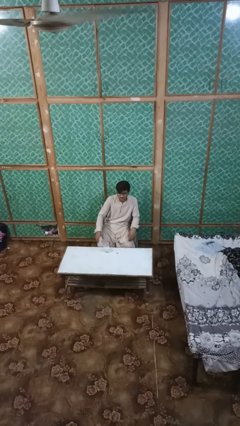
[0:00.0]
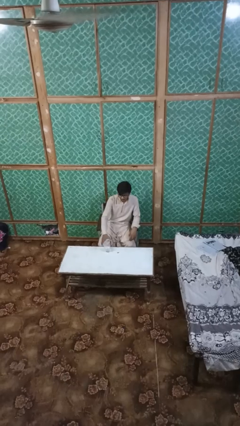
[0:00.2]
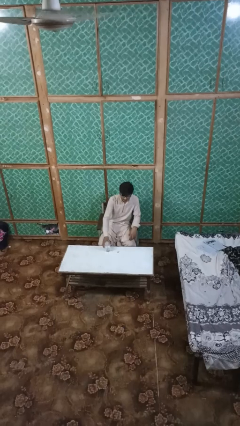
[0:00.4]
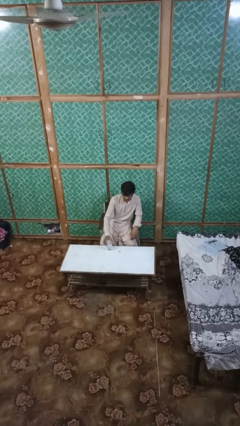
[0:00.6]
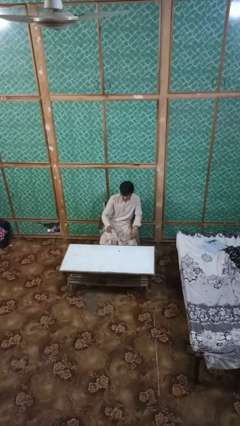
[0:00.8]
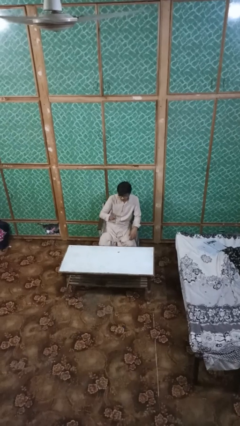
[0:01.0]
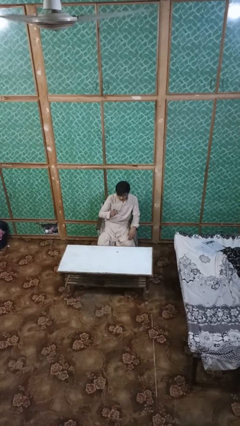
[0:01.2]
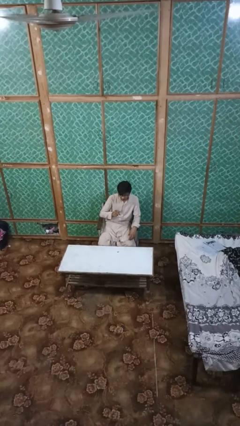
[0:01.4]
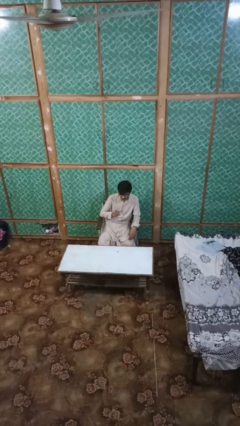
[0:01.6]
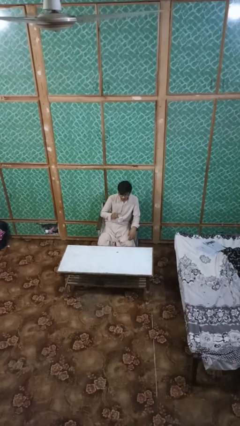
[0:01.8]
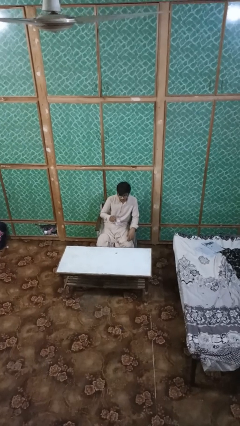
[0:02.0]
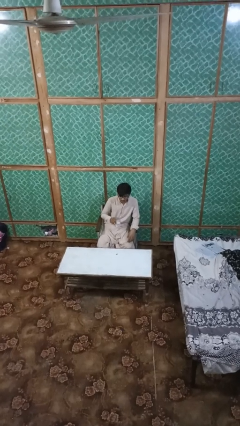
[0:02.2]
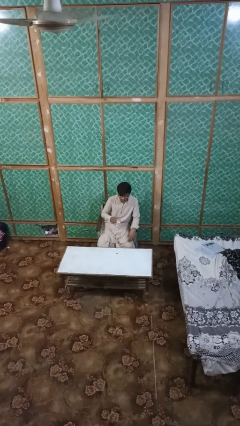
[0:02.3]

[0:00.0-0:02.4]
person picks up object from table

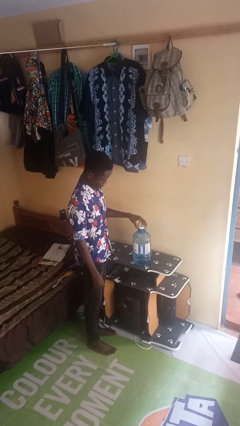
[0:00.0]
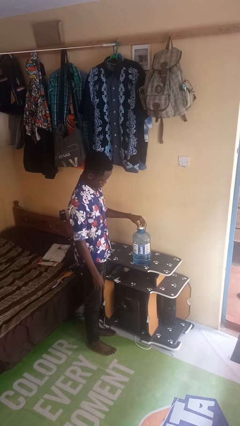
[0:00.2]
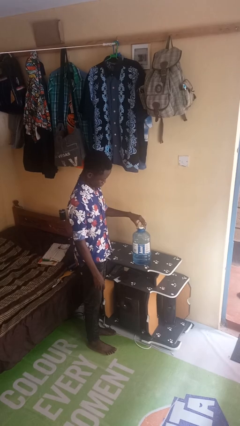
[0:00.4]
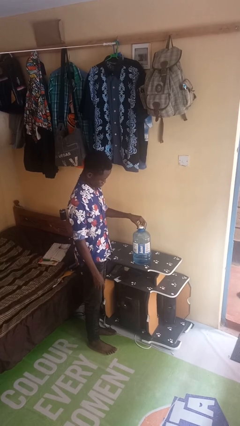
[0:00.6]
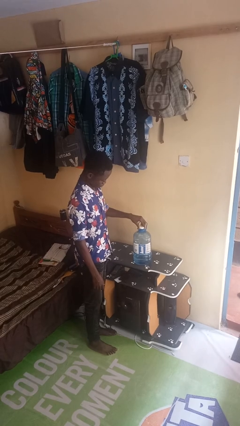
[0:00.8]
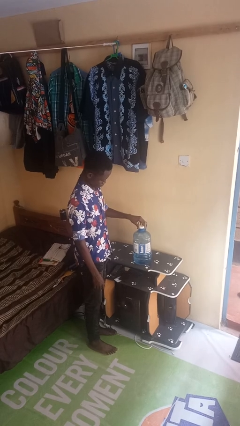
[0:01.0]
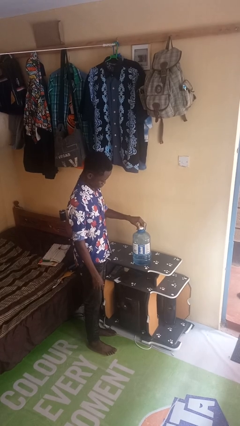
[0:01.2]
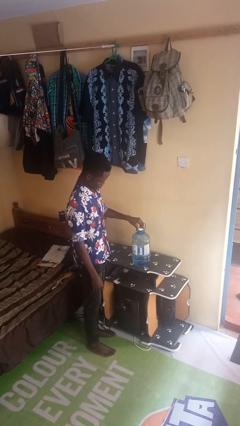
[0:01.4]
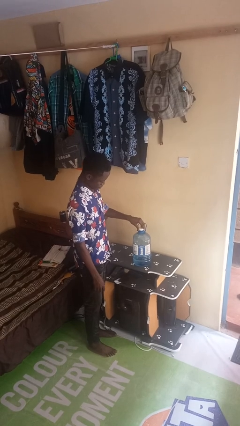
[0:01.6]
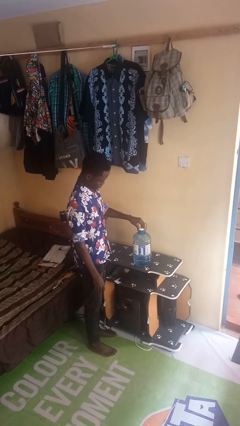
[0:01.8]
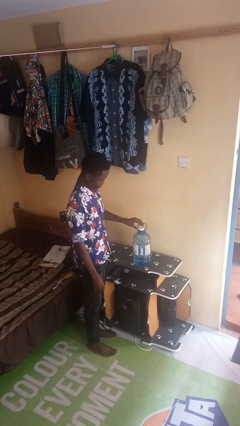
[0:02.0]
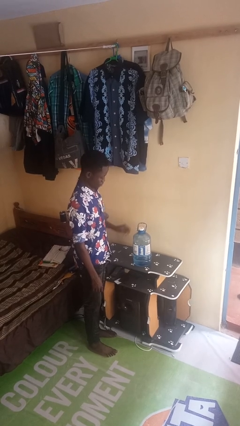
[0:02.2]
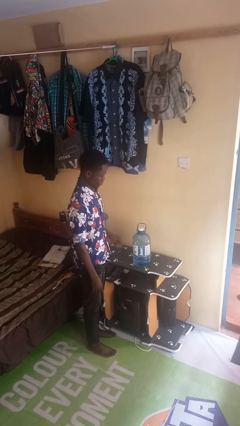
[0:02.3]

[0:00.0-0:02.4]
person screws lid to bottle

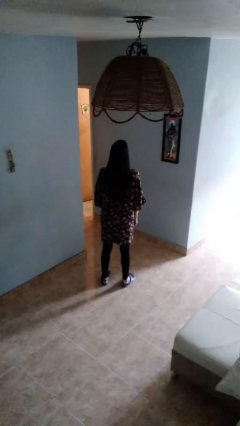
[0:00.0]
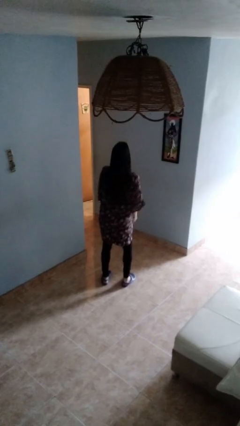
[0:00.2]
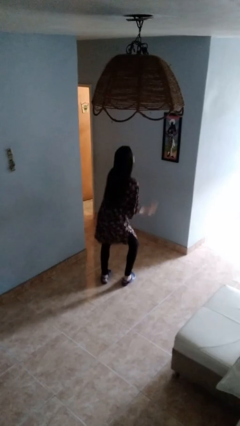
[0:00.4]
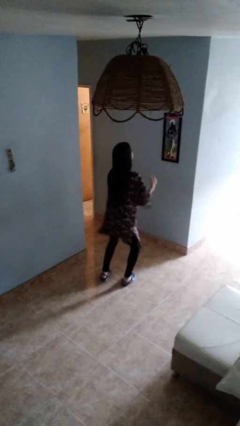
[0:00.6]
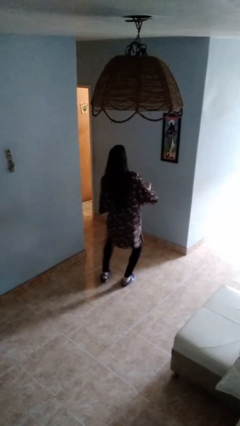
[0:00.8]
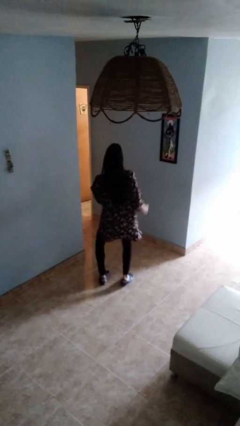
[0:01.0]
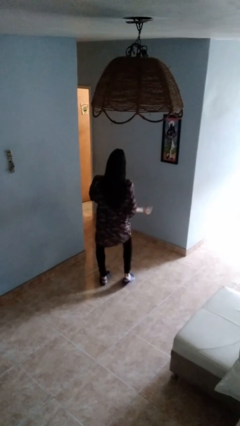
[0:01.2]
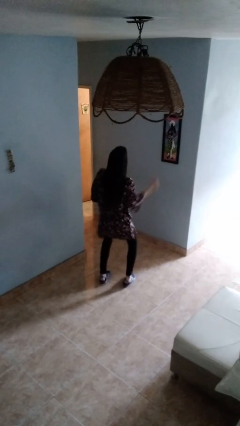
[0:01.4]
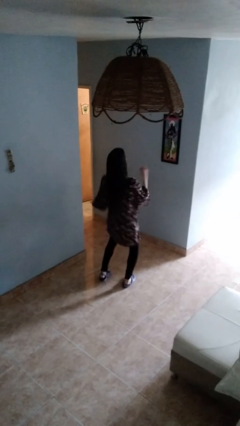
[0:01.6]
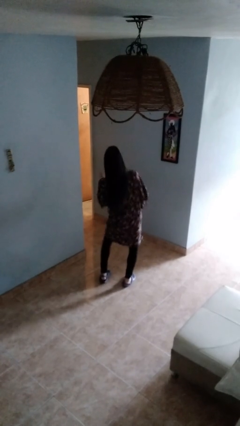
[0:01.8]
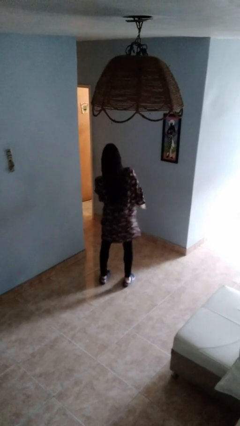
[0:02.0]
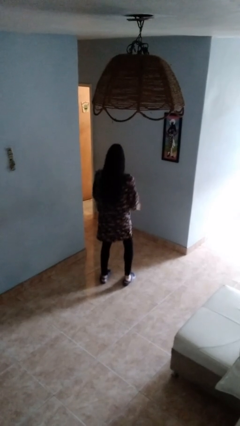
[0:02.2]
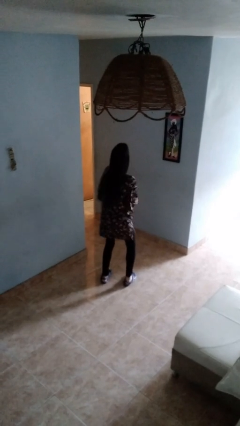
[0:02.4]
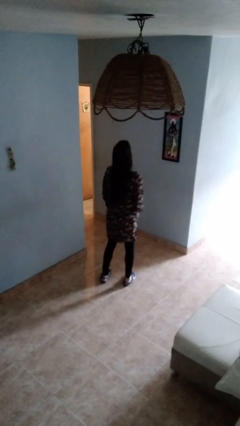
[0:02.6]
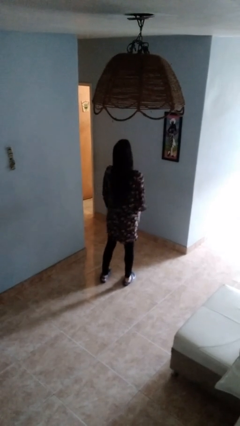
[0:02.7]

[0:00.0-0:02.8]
person dances in place

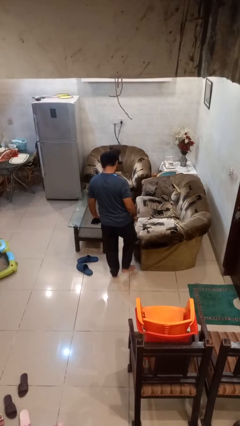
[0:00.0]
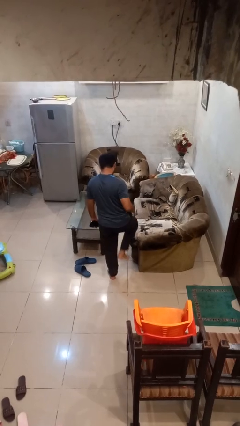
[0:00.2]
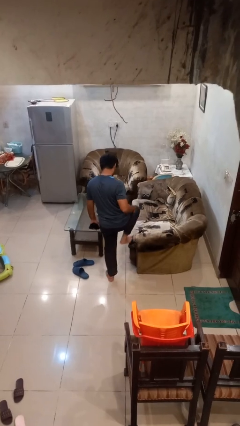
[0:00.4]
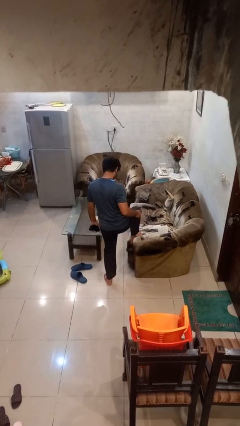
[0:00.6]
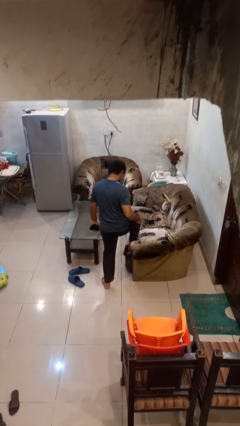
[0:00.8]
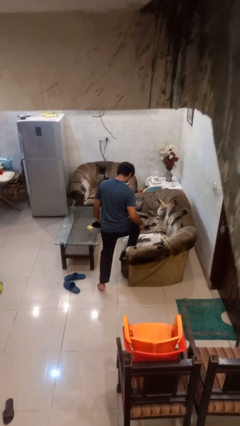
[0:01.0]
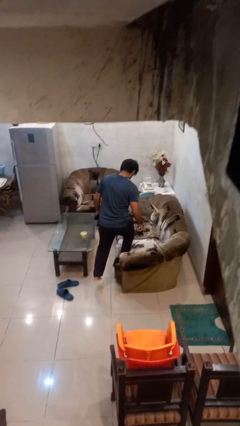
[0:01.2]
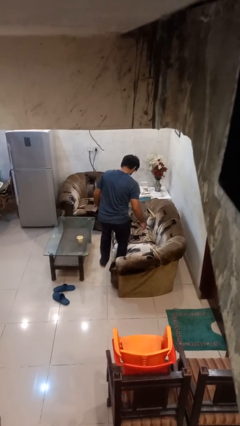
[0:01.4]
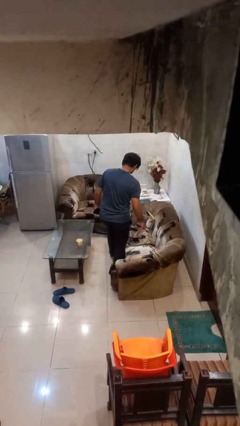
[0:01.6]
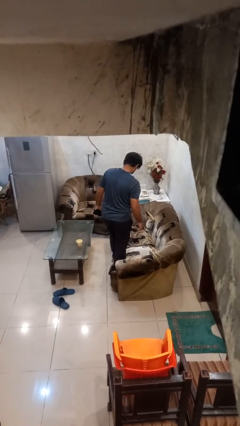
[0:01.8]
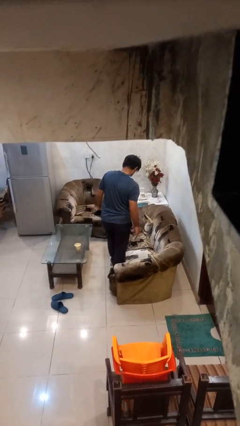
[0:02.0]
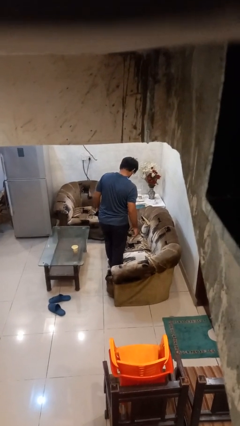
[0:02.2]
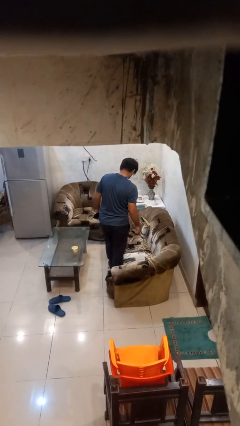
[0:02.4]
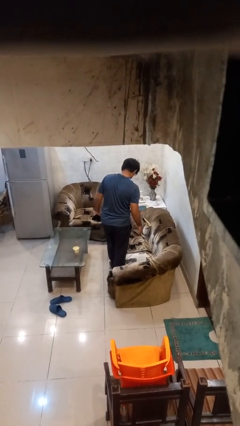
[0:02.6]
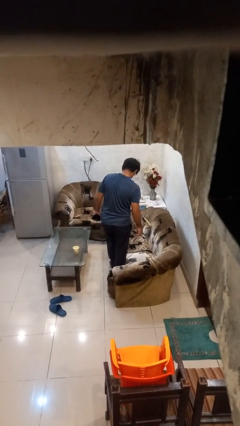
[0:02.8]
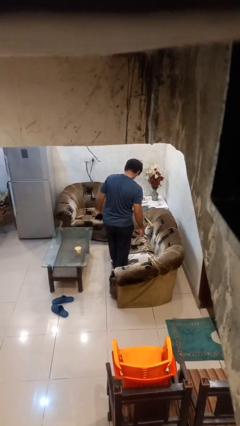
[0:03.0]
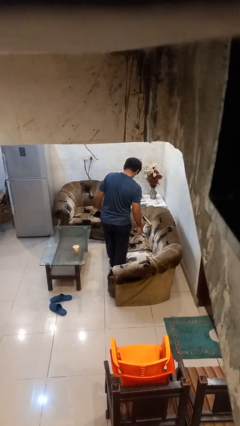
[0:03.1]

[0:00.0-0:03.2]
person climbs on couch

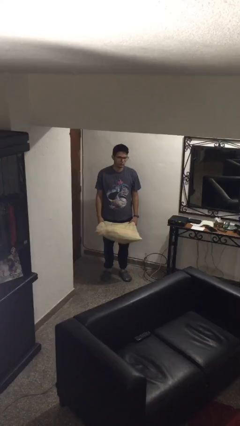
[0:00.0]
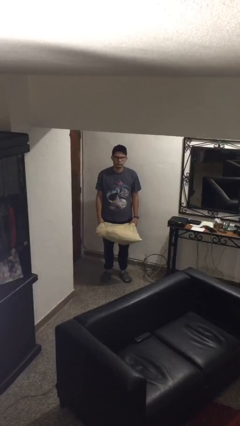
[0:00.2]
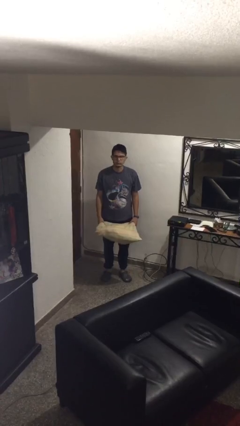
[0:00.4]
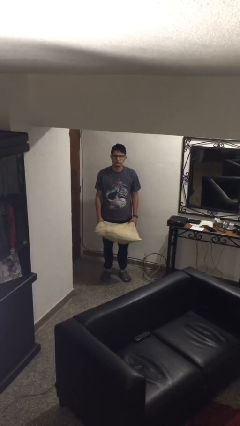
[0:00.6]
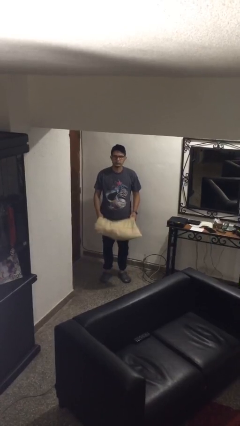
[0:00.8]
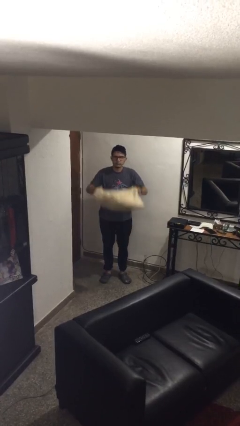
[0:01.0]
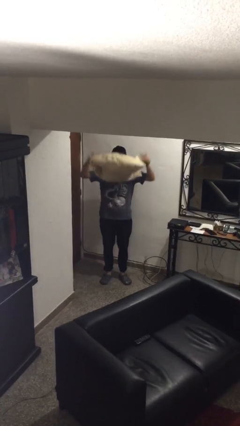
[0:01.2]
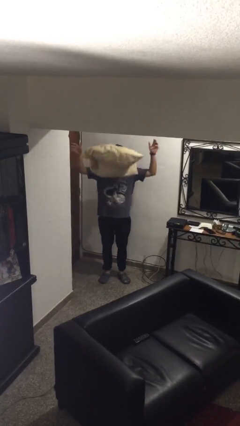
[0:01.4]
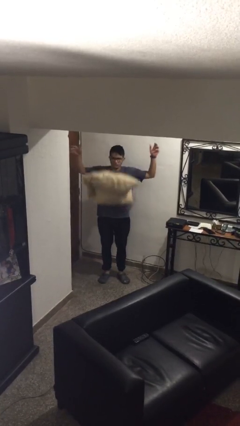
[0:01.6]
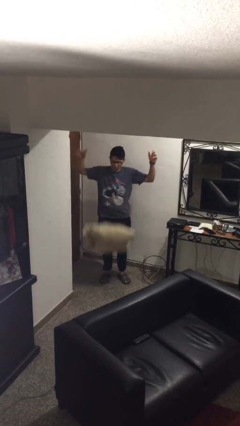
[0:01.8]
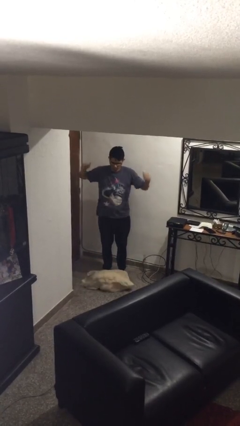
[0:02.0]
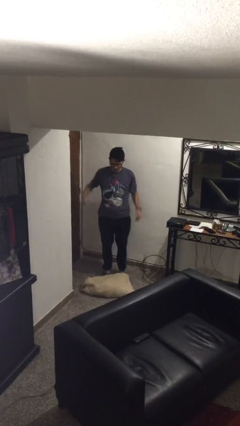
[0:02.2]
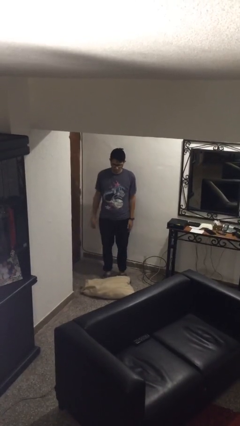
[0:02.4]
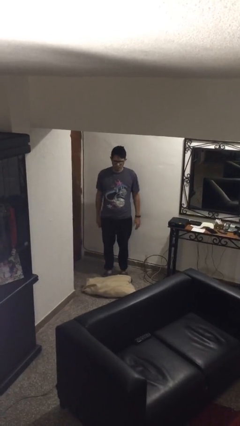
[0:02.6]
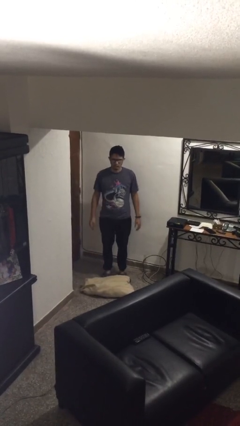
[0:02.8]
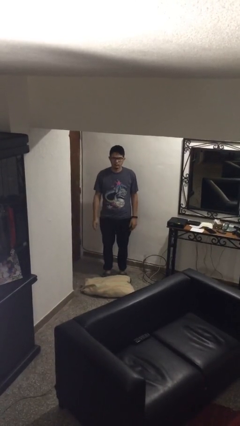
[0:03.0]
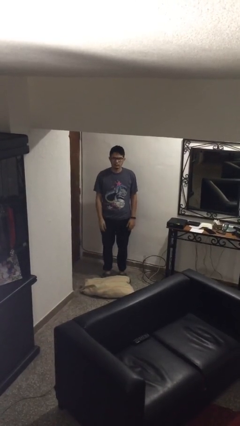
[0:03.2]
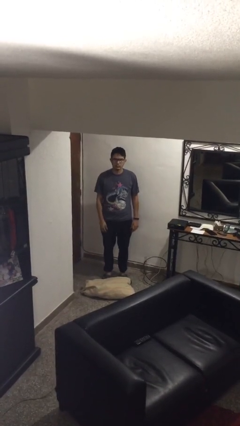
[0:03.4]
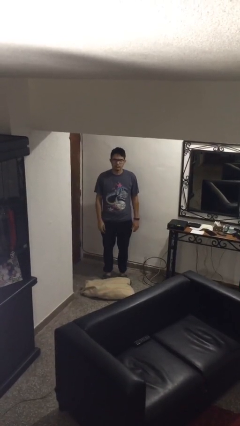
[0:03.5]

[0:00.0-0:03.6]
person throws object into air

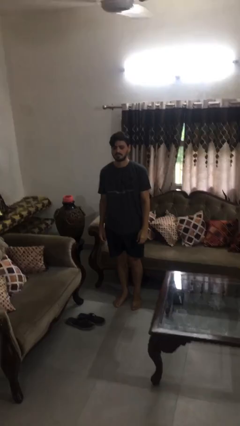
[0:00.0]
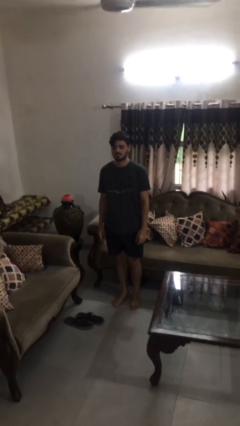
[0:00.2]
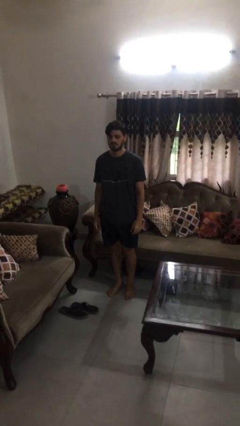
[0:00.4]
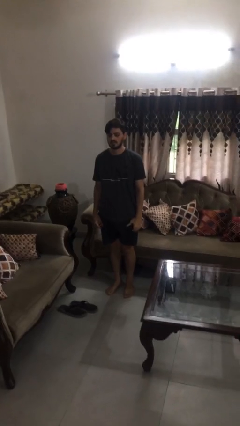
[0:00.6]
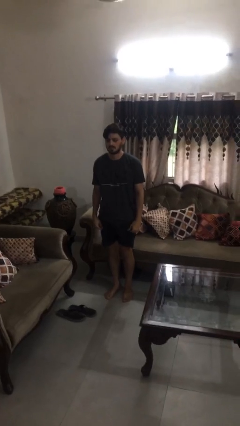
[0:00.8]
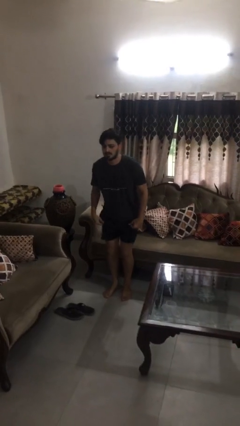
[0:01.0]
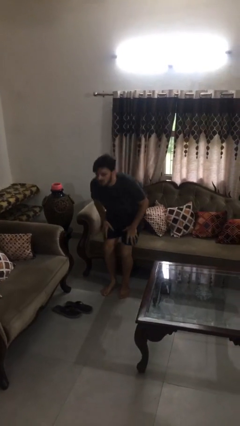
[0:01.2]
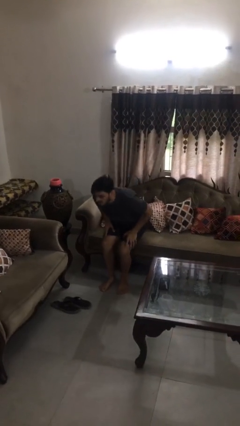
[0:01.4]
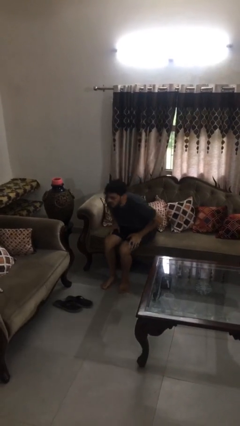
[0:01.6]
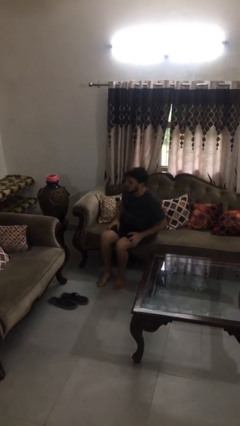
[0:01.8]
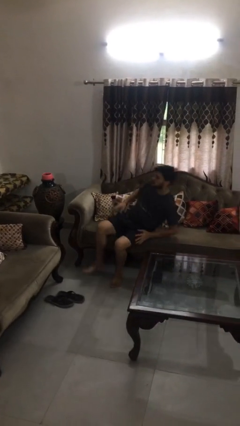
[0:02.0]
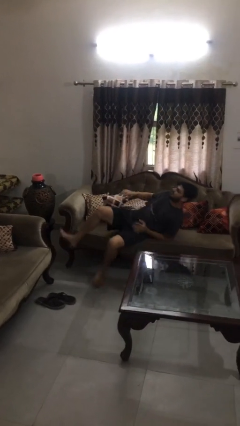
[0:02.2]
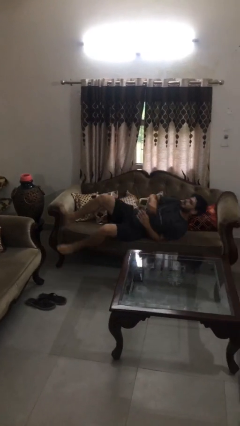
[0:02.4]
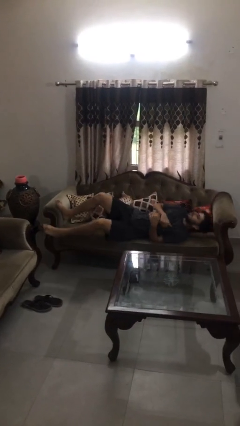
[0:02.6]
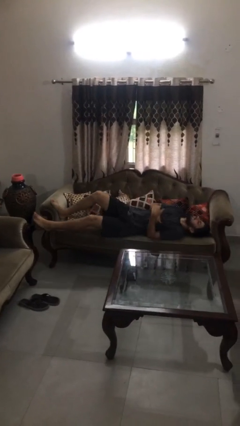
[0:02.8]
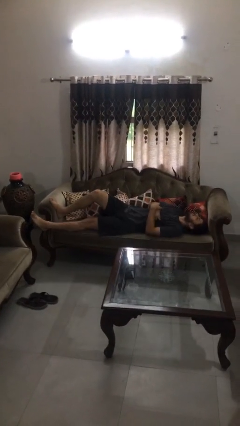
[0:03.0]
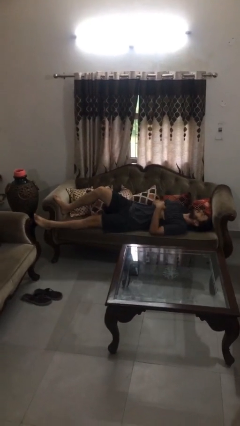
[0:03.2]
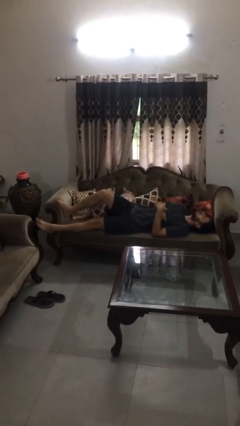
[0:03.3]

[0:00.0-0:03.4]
person lies down on couch
